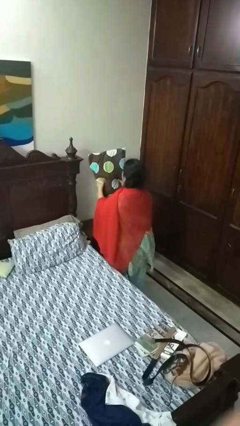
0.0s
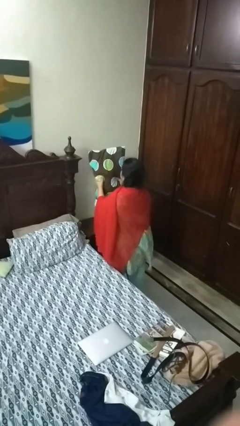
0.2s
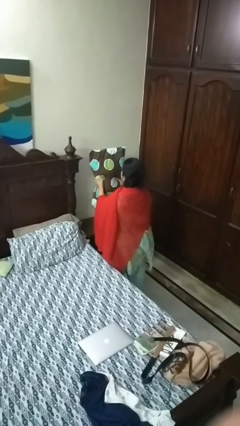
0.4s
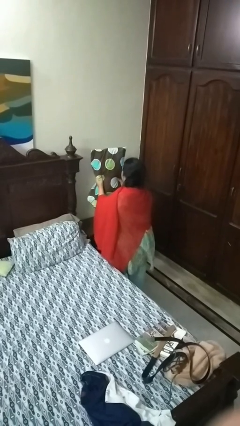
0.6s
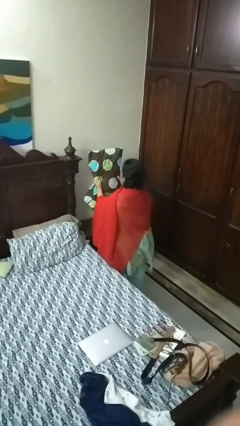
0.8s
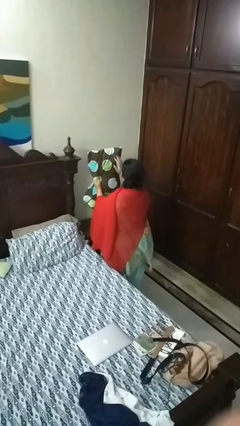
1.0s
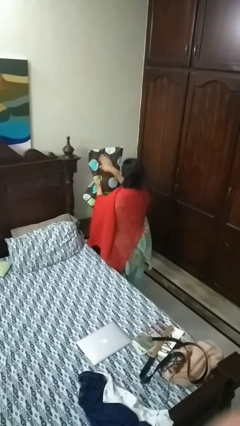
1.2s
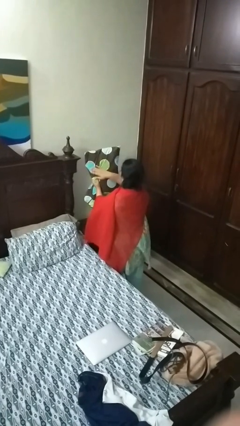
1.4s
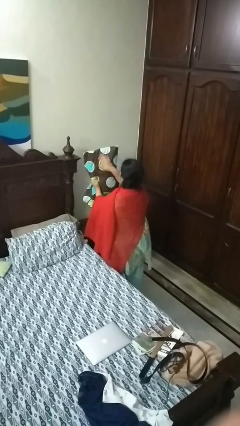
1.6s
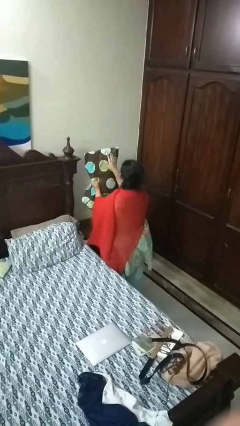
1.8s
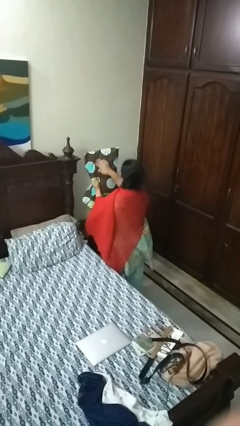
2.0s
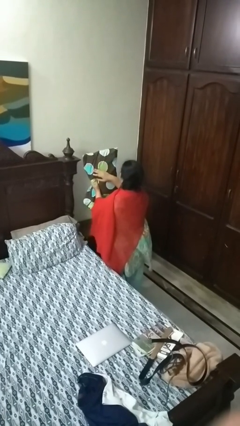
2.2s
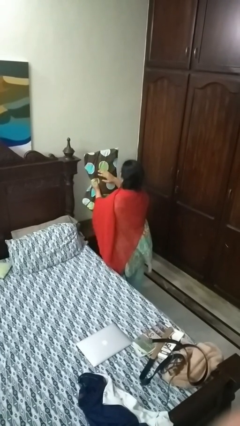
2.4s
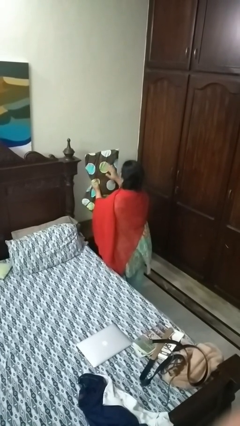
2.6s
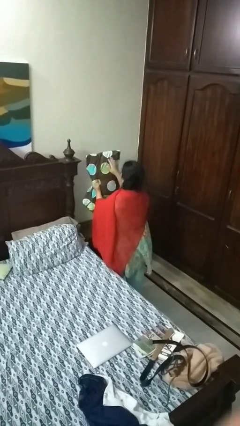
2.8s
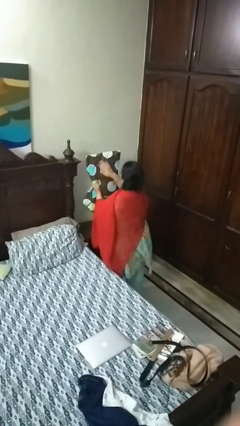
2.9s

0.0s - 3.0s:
person waves hand over object

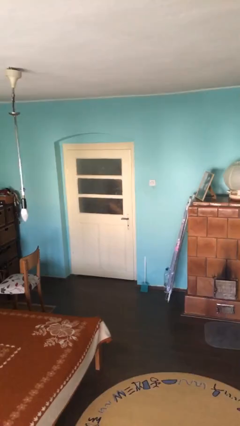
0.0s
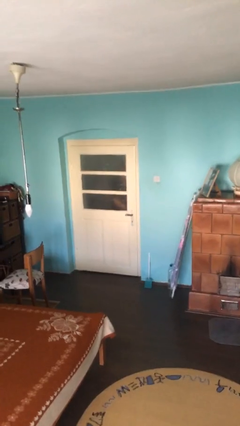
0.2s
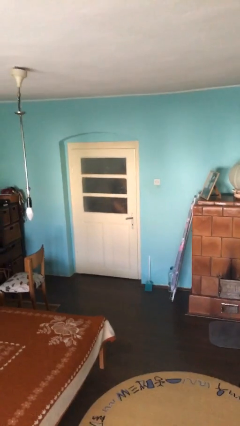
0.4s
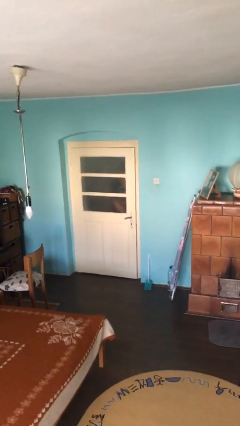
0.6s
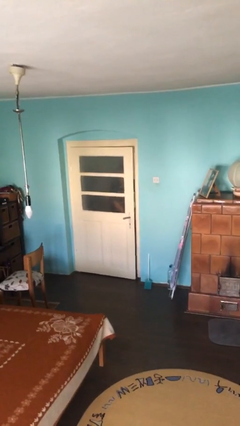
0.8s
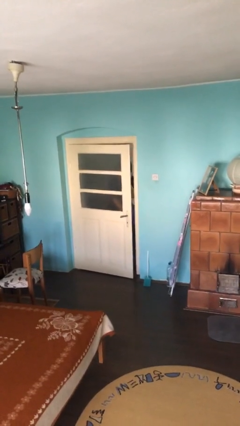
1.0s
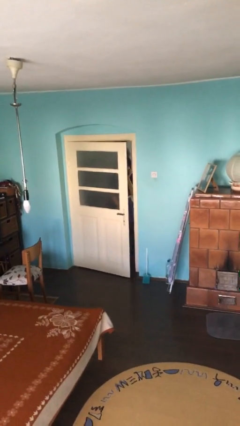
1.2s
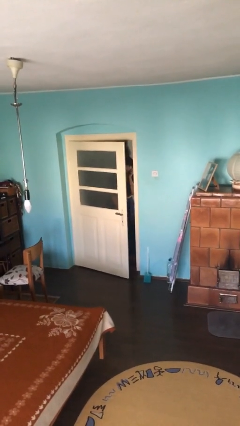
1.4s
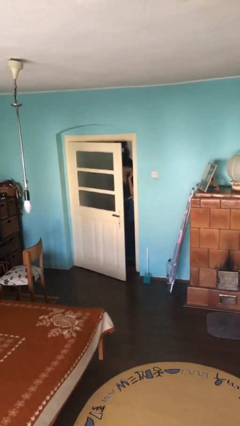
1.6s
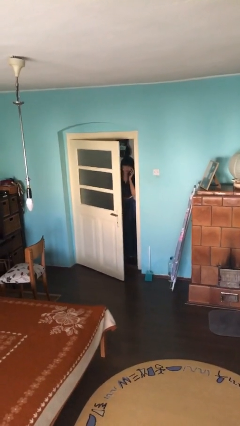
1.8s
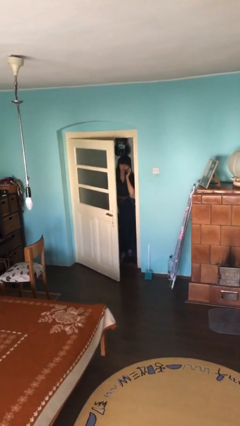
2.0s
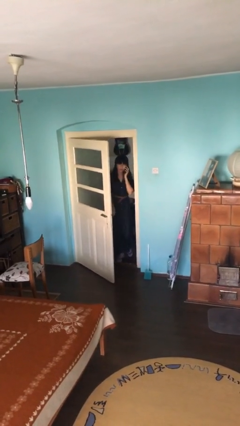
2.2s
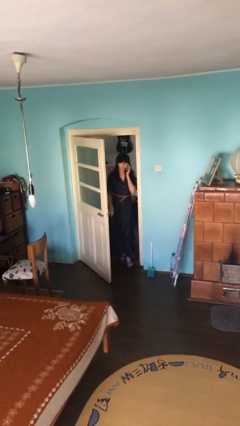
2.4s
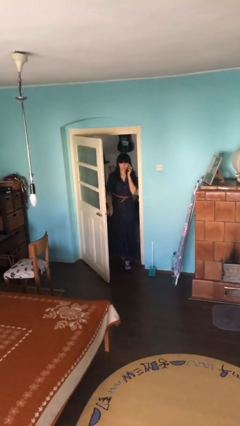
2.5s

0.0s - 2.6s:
person opens facility door

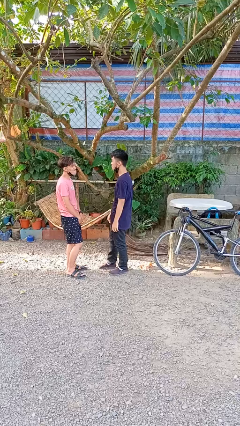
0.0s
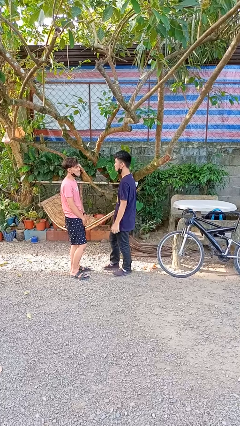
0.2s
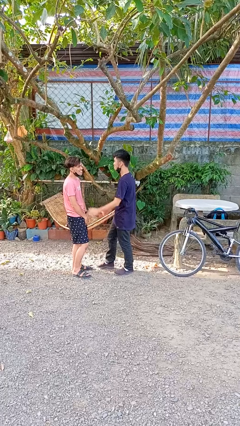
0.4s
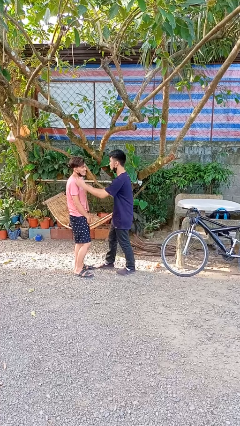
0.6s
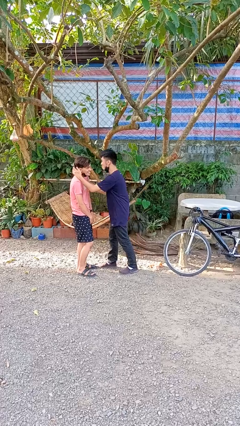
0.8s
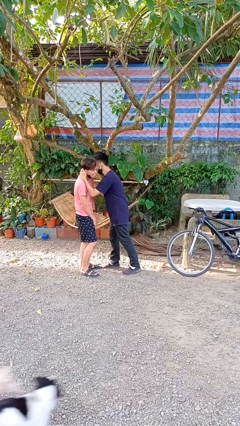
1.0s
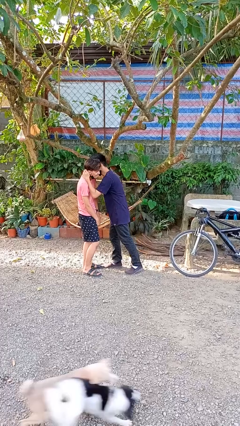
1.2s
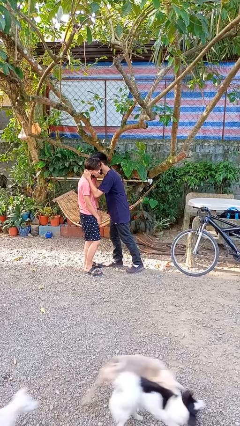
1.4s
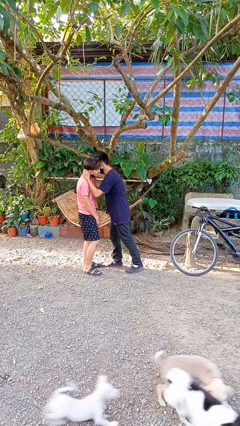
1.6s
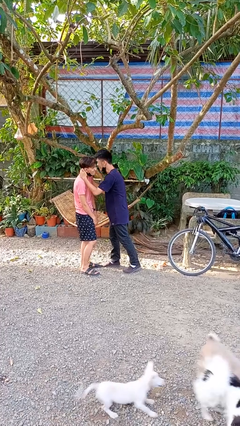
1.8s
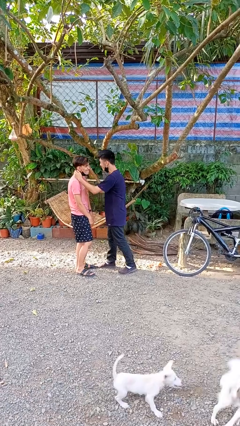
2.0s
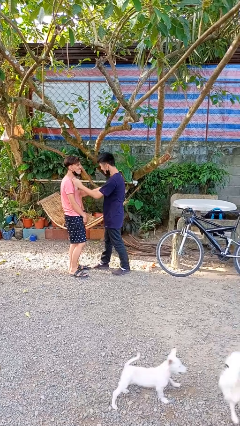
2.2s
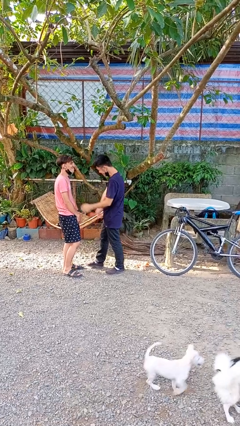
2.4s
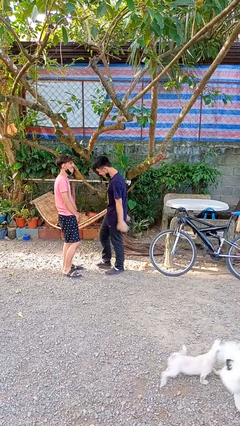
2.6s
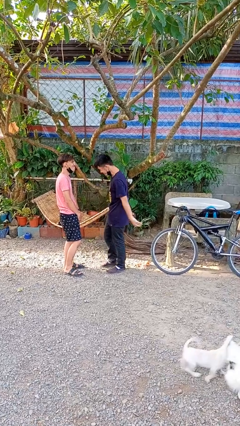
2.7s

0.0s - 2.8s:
person kisses cheek of person

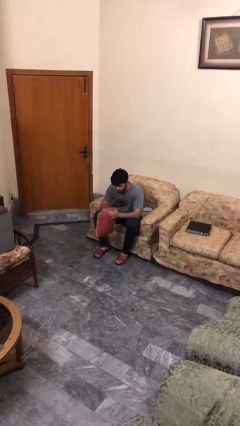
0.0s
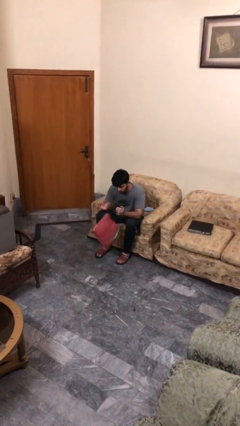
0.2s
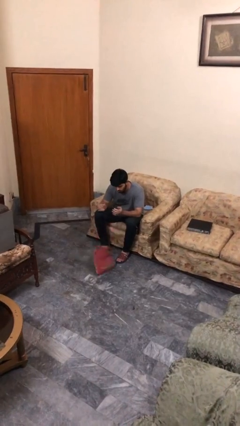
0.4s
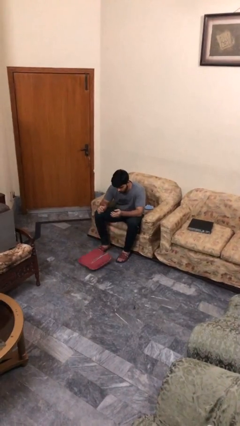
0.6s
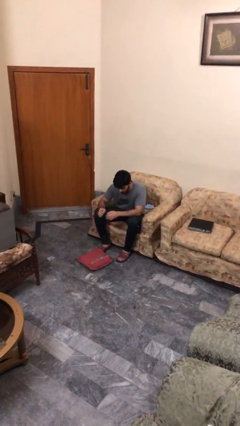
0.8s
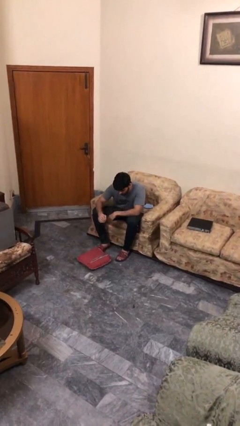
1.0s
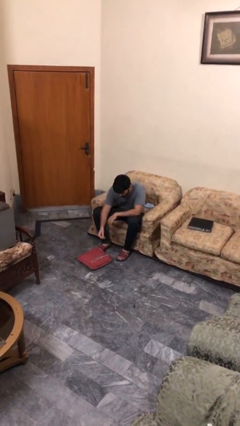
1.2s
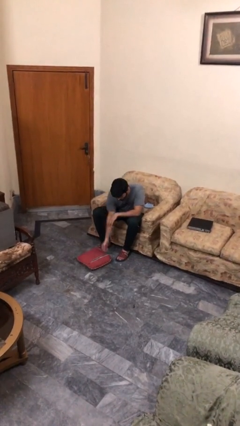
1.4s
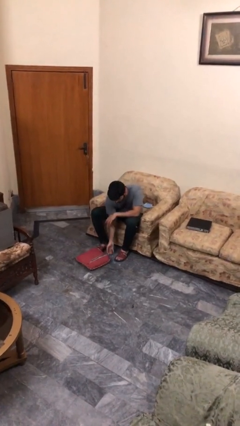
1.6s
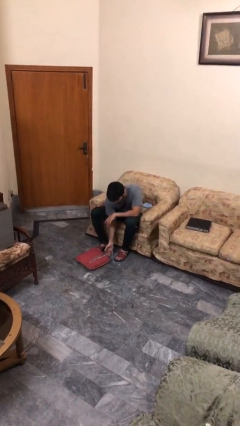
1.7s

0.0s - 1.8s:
person drops object

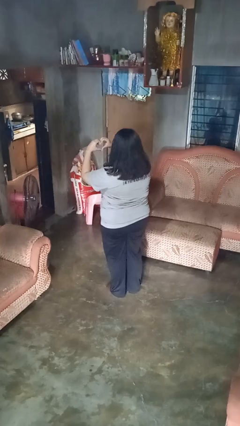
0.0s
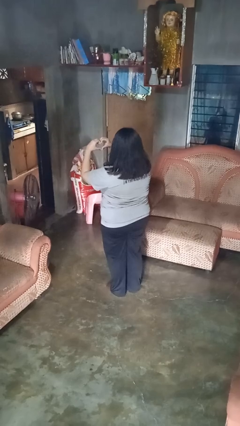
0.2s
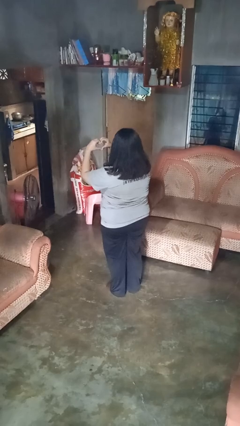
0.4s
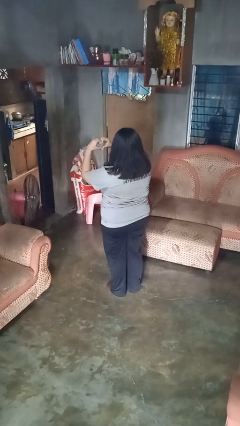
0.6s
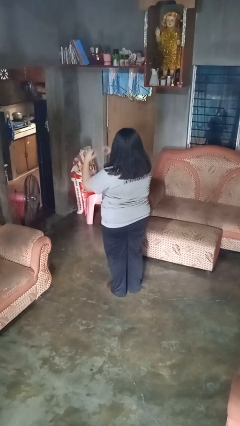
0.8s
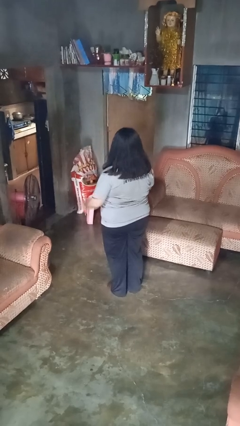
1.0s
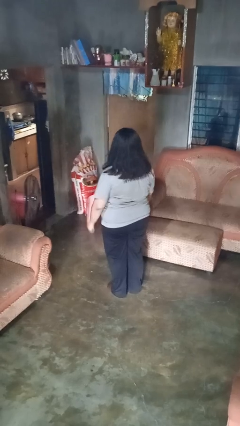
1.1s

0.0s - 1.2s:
person gestures heart

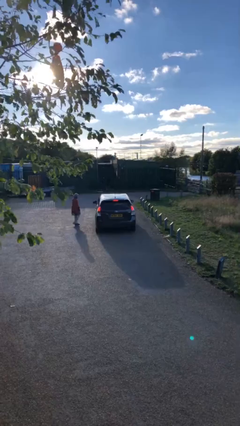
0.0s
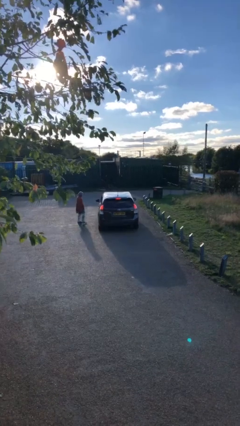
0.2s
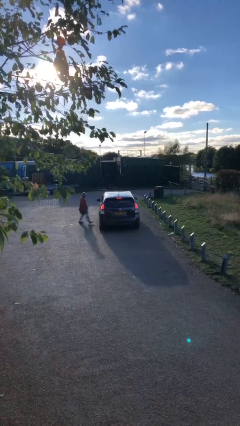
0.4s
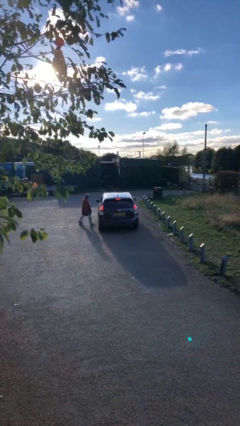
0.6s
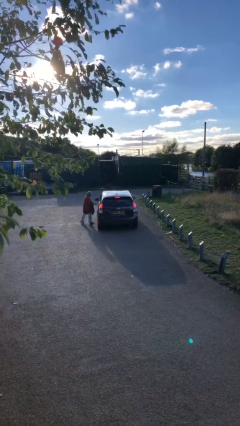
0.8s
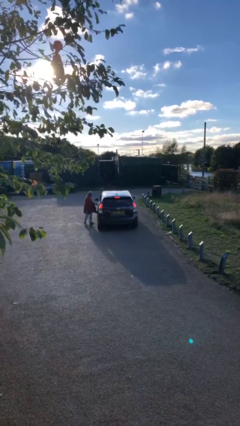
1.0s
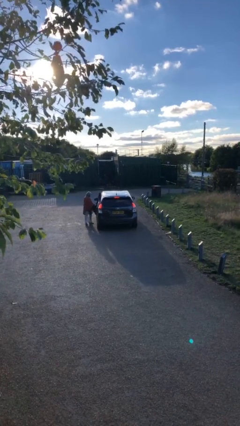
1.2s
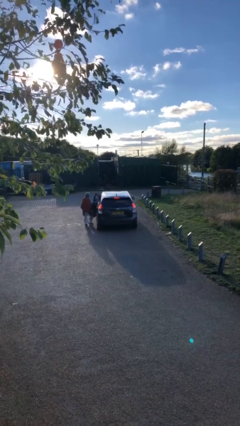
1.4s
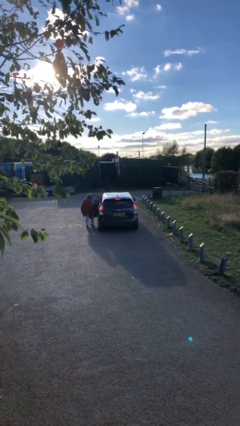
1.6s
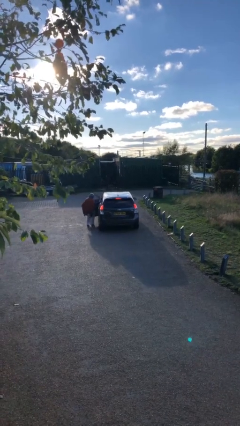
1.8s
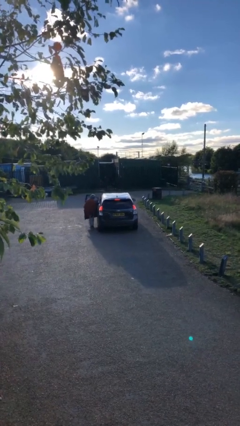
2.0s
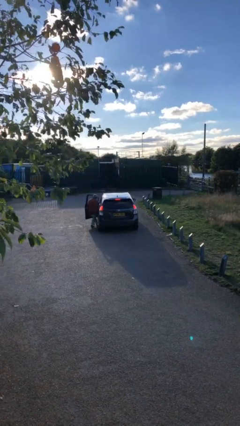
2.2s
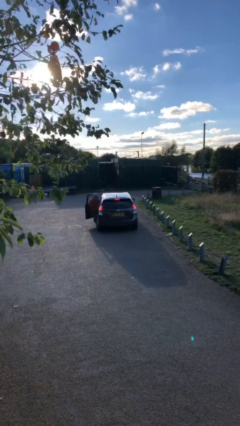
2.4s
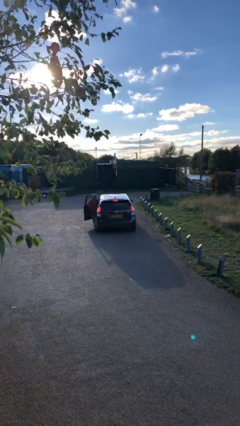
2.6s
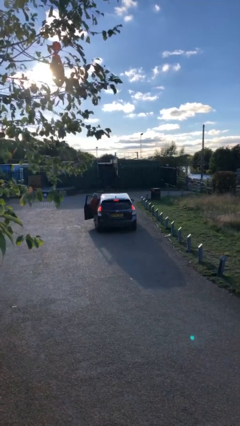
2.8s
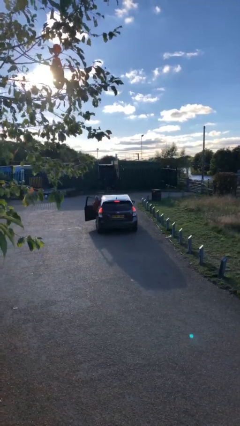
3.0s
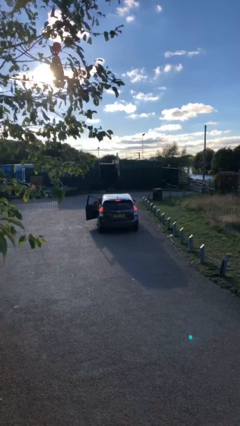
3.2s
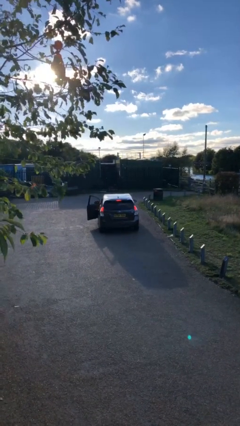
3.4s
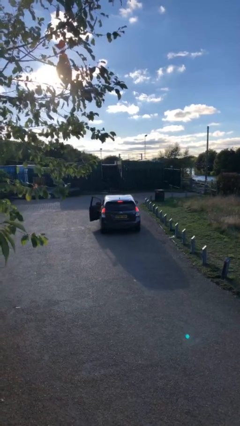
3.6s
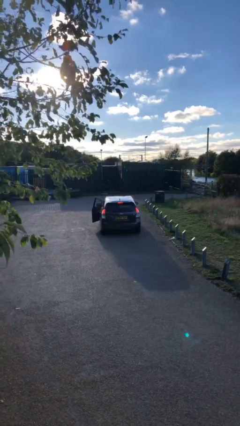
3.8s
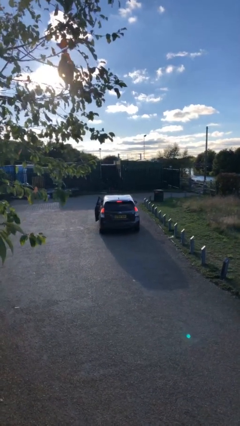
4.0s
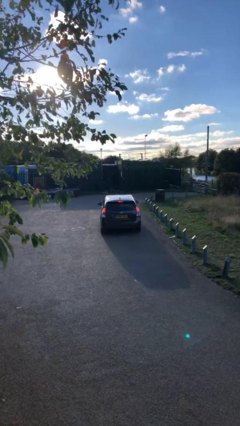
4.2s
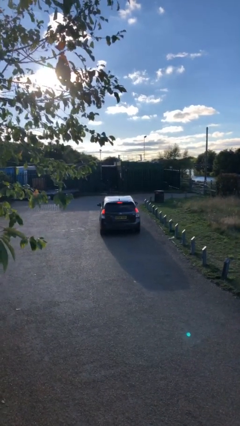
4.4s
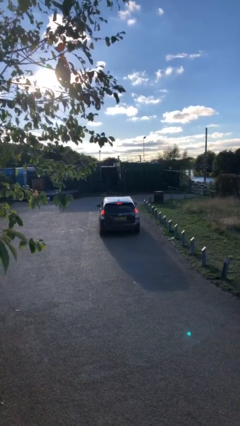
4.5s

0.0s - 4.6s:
car picks up person

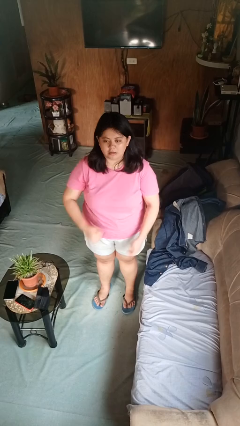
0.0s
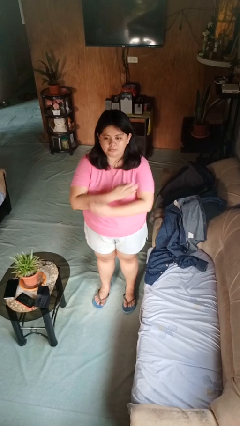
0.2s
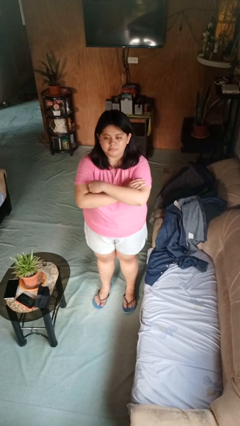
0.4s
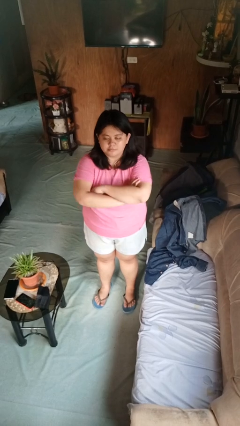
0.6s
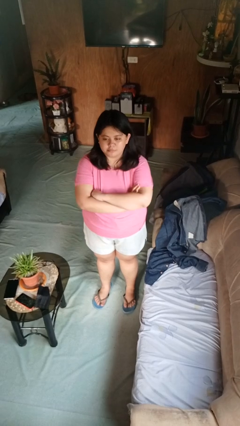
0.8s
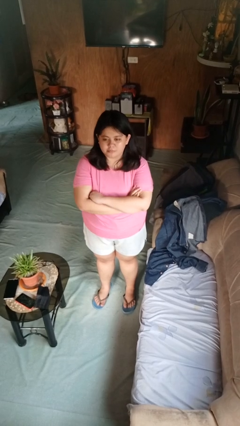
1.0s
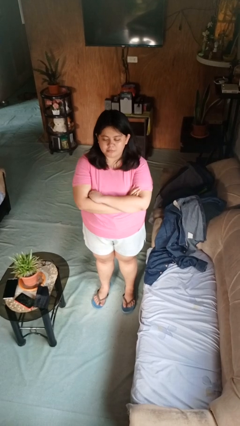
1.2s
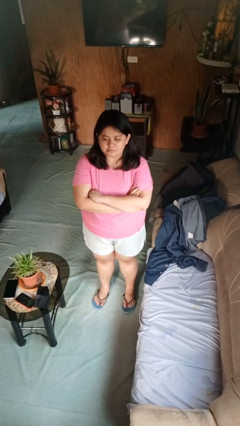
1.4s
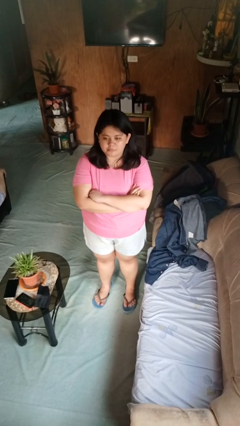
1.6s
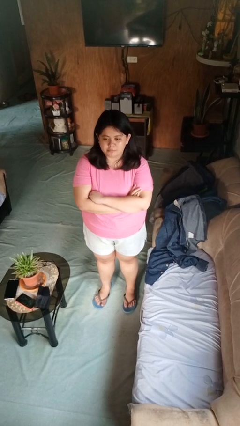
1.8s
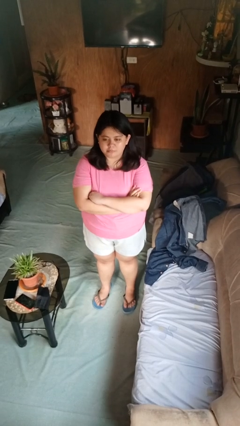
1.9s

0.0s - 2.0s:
person crosses arms
